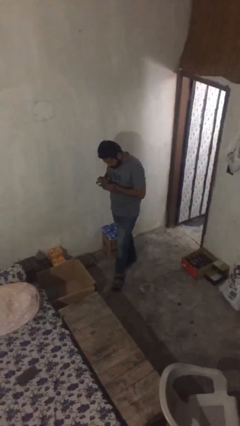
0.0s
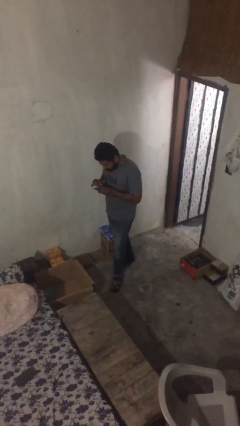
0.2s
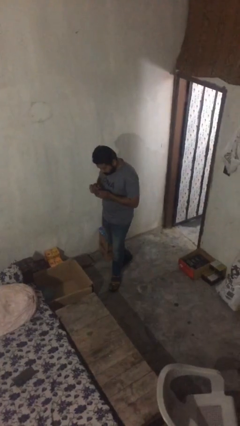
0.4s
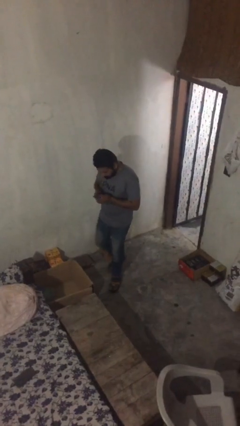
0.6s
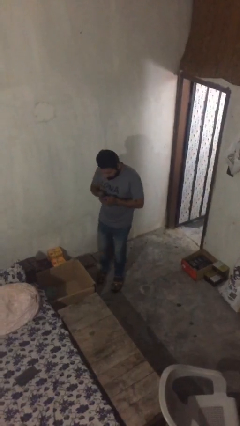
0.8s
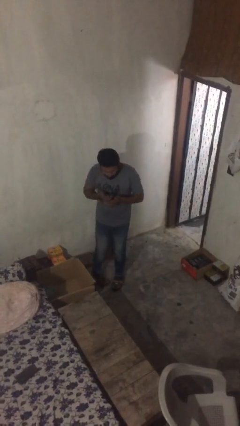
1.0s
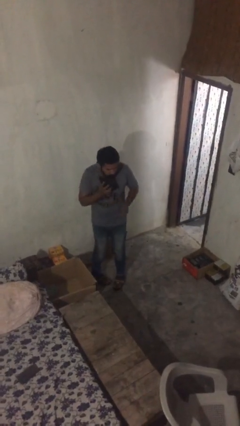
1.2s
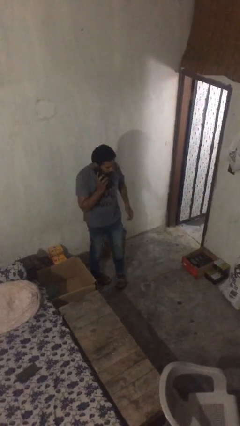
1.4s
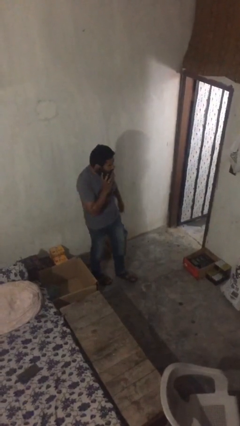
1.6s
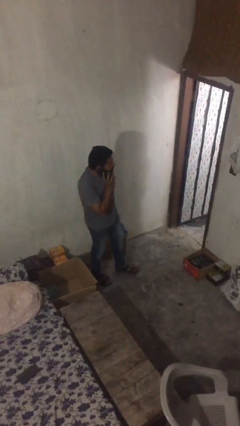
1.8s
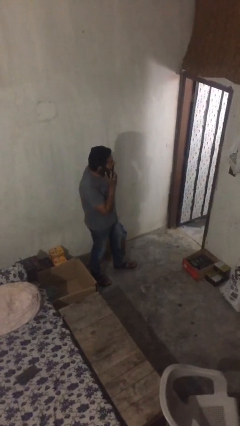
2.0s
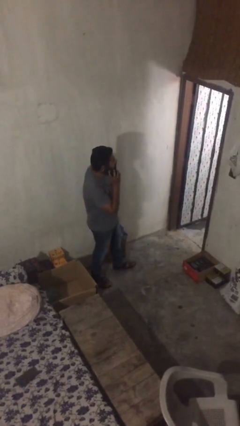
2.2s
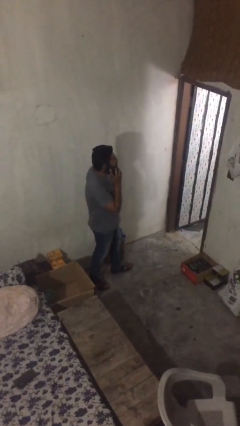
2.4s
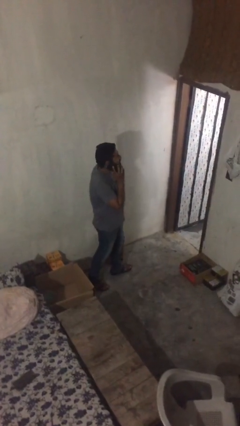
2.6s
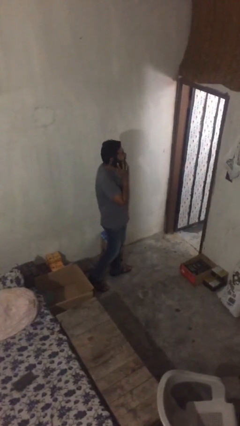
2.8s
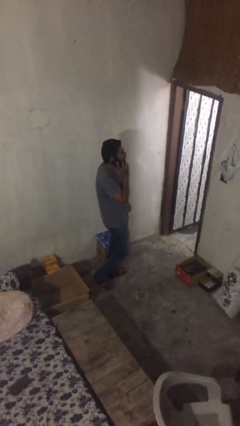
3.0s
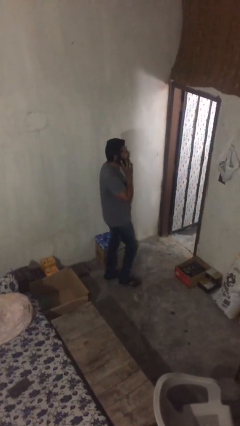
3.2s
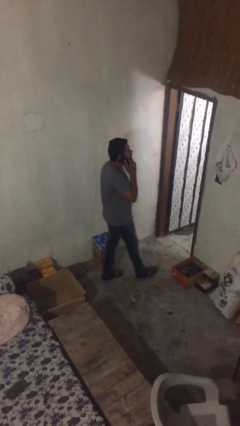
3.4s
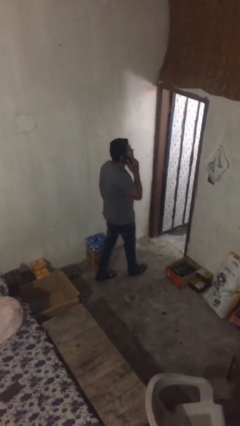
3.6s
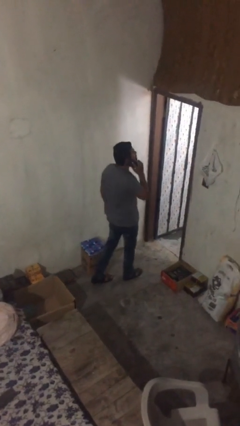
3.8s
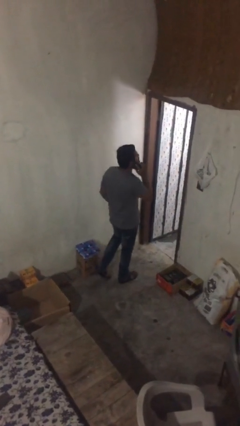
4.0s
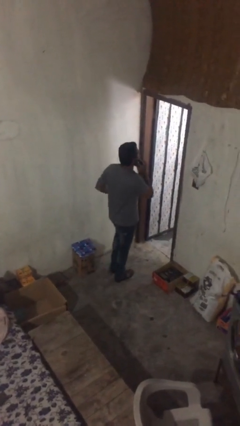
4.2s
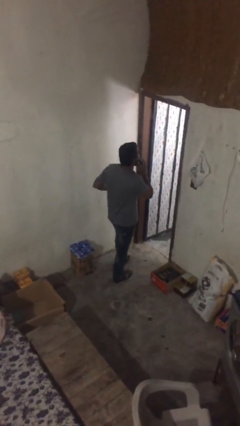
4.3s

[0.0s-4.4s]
person talks on phone

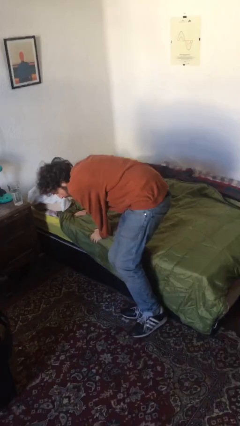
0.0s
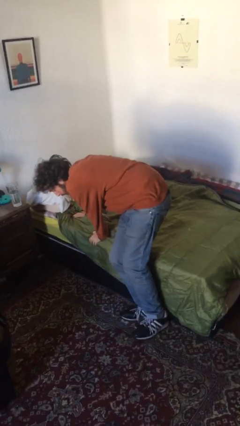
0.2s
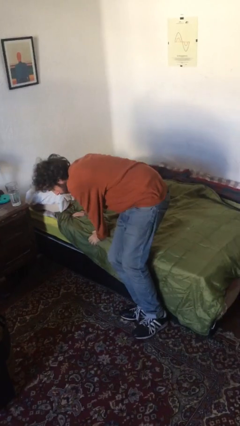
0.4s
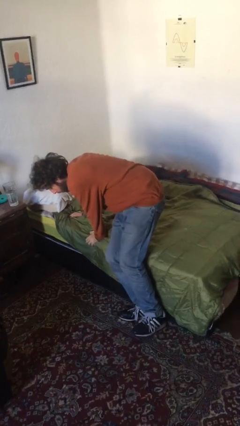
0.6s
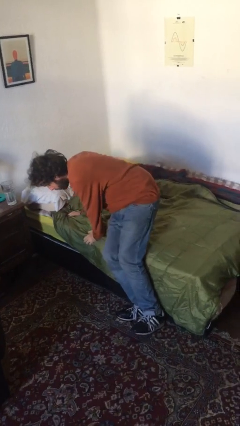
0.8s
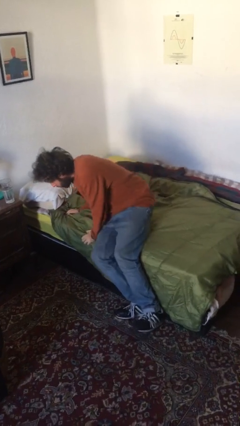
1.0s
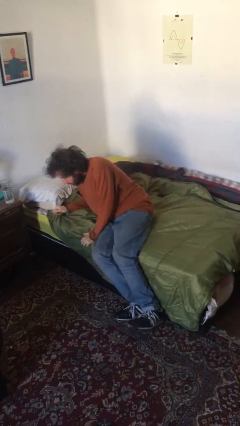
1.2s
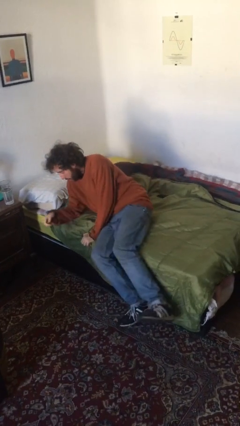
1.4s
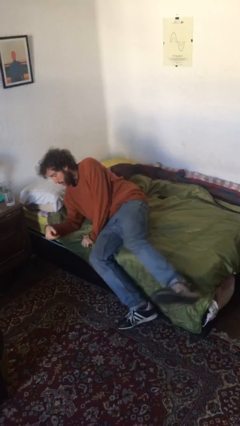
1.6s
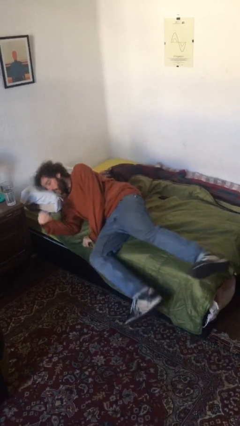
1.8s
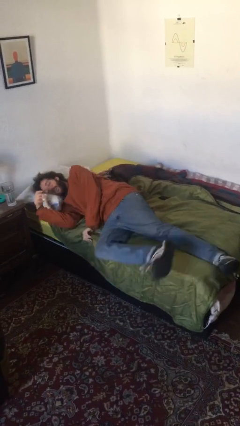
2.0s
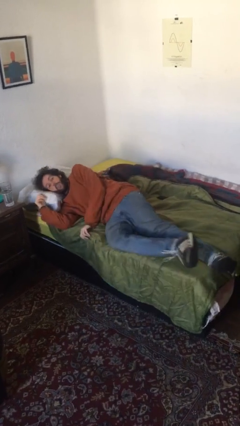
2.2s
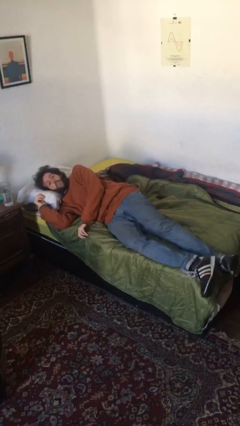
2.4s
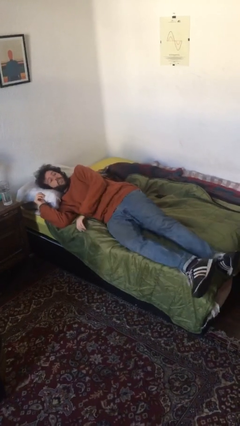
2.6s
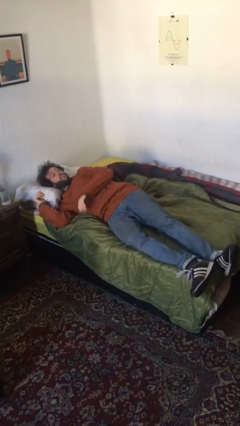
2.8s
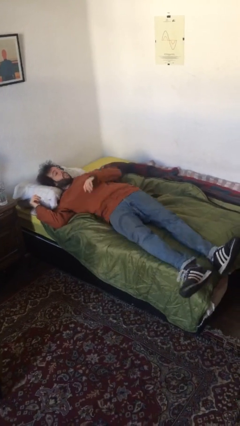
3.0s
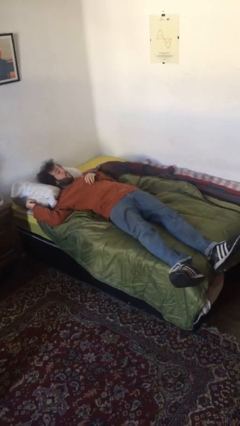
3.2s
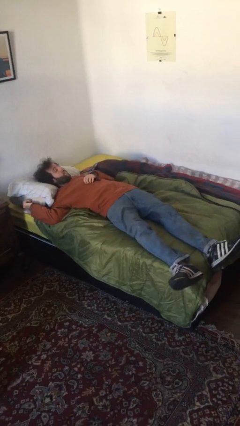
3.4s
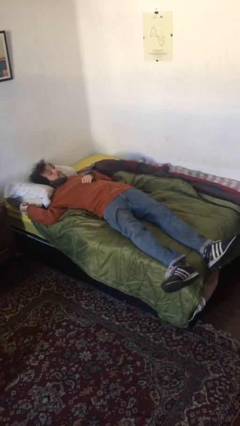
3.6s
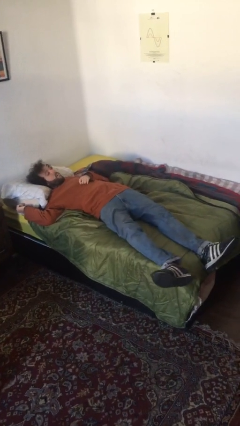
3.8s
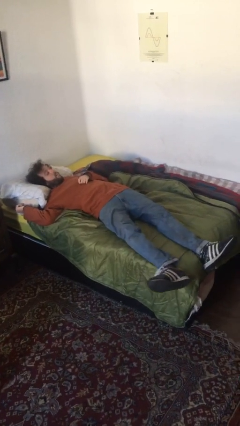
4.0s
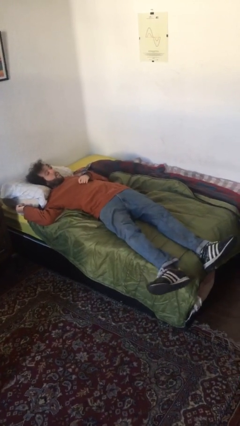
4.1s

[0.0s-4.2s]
person lies down on bed

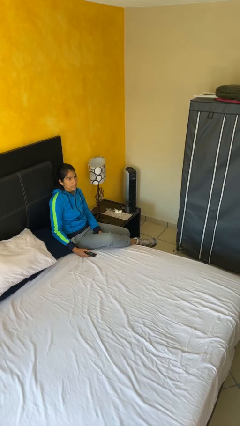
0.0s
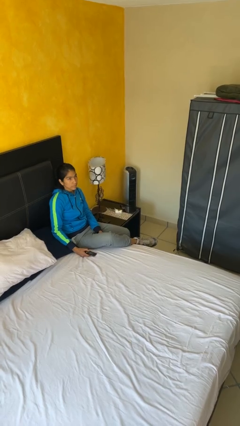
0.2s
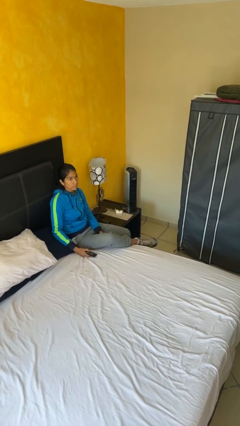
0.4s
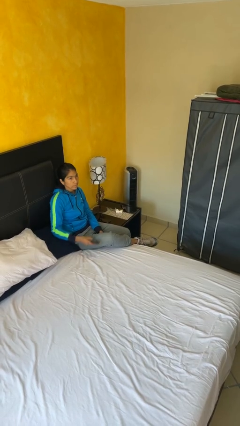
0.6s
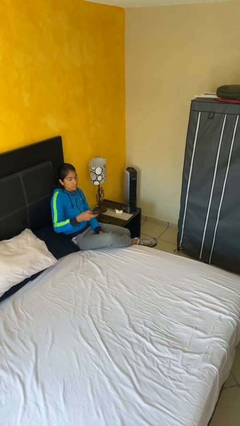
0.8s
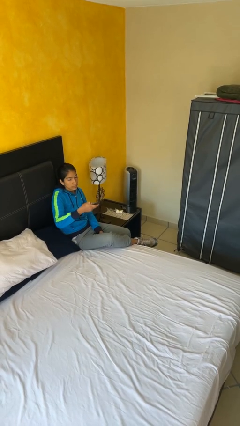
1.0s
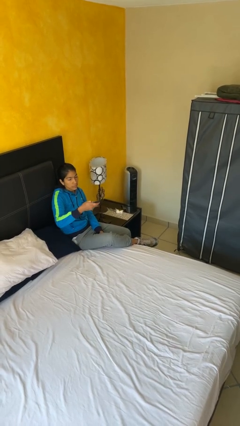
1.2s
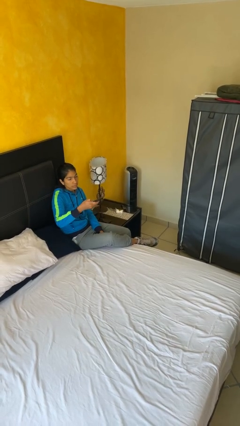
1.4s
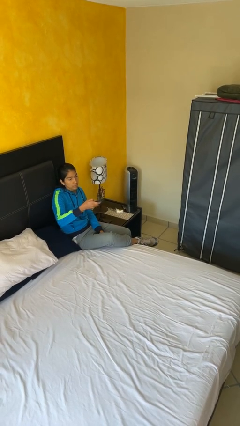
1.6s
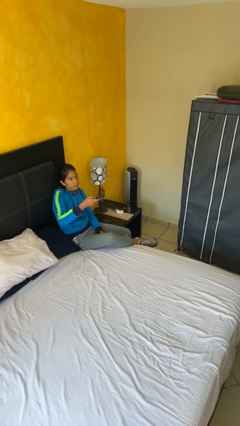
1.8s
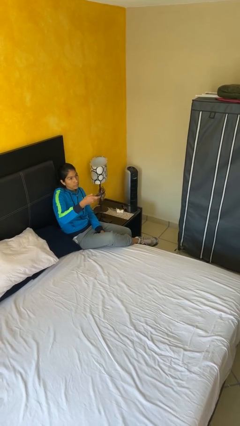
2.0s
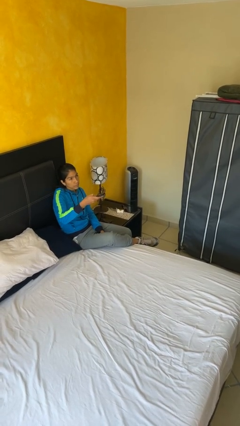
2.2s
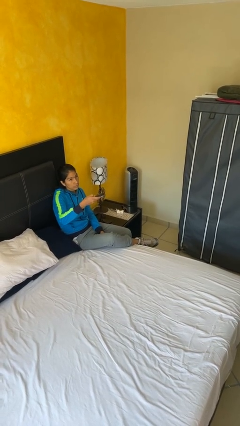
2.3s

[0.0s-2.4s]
person uses television remote

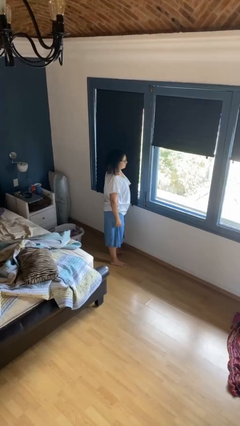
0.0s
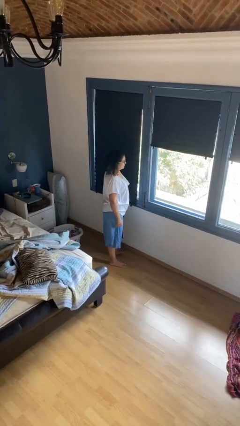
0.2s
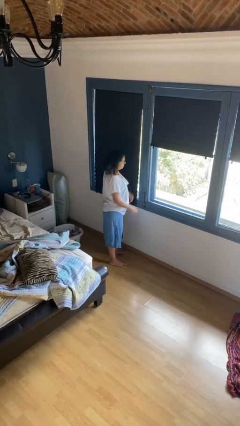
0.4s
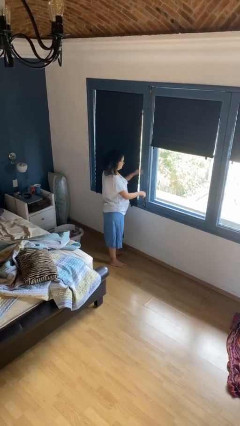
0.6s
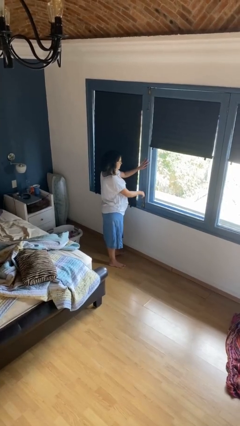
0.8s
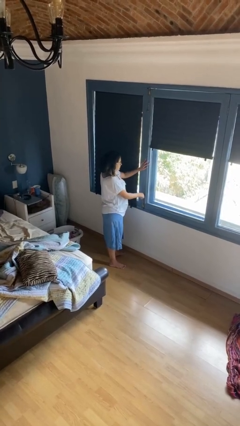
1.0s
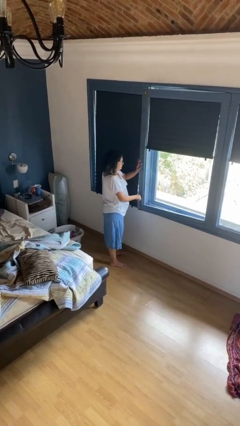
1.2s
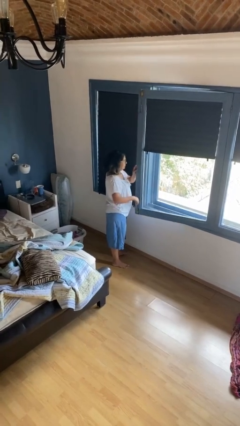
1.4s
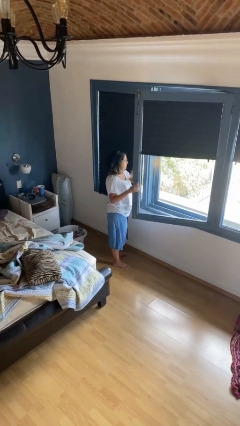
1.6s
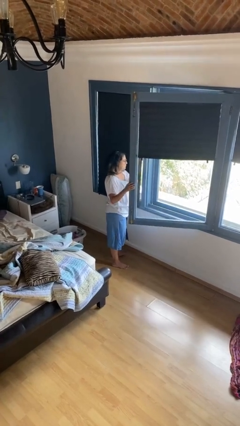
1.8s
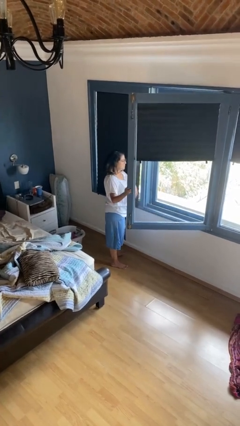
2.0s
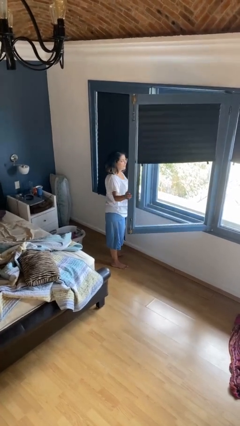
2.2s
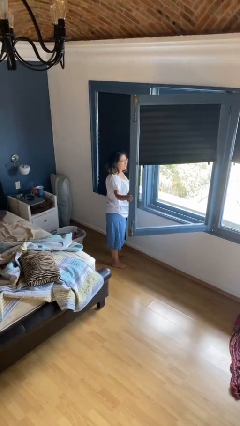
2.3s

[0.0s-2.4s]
person opens home window

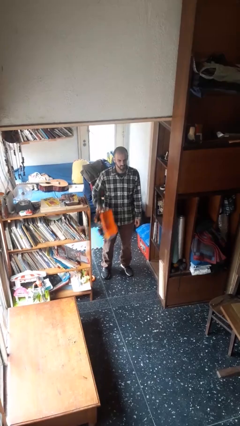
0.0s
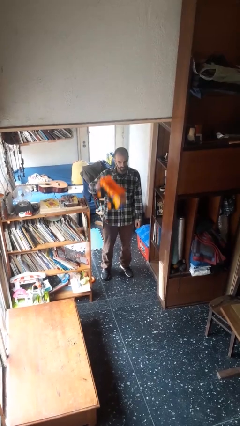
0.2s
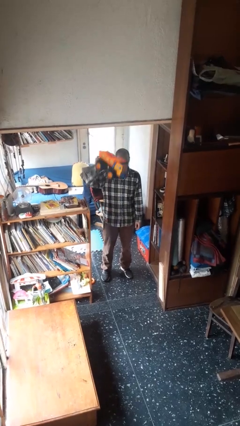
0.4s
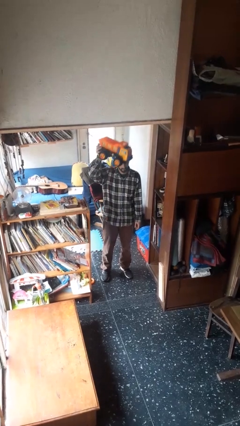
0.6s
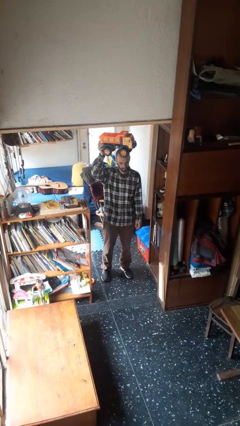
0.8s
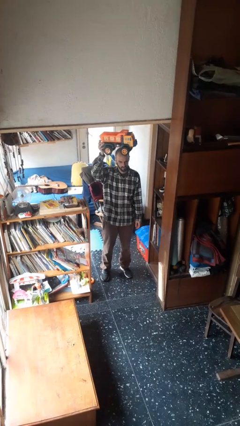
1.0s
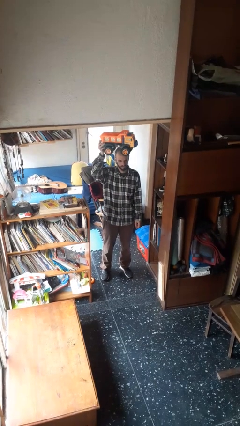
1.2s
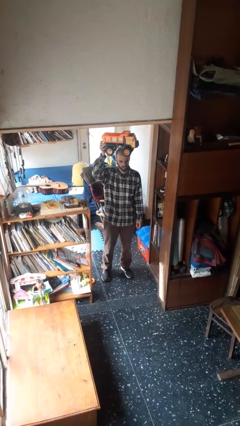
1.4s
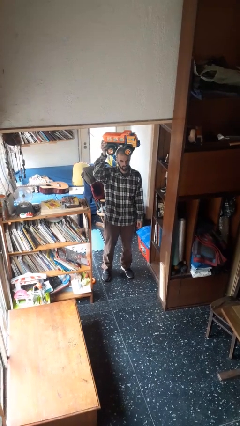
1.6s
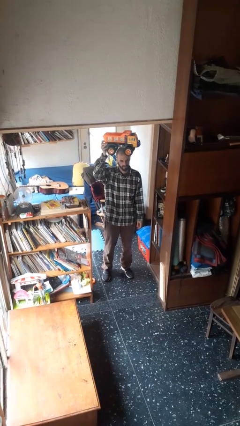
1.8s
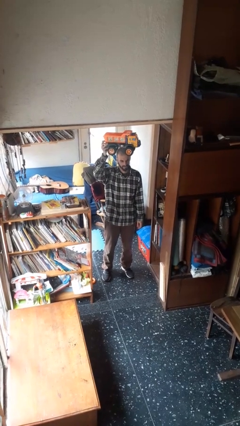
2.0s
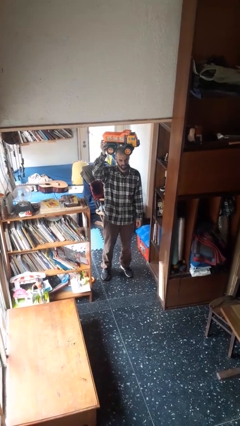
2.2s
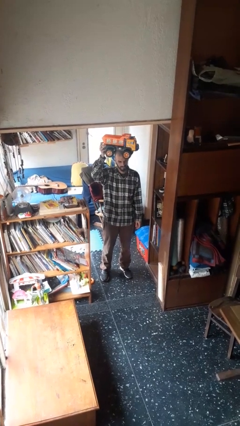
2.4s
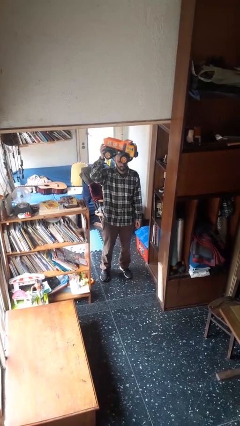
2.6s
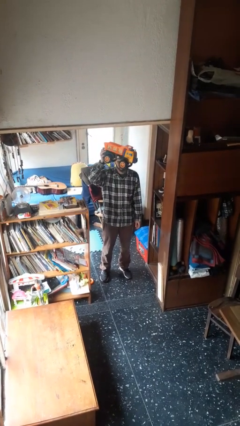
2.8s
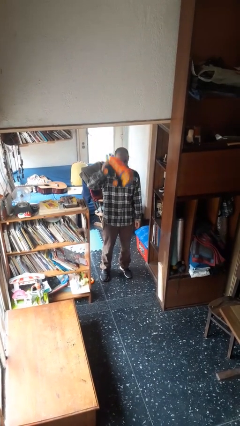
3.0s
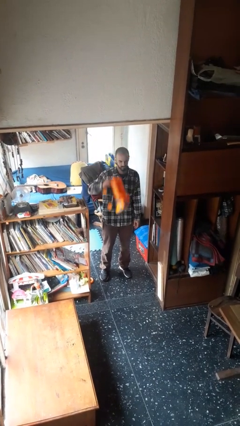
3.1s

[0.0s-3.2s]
person holds object above head

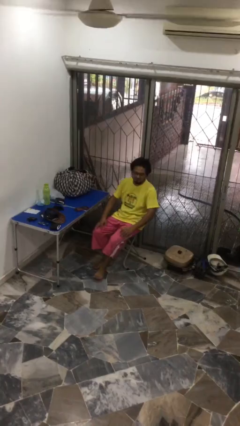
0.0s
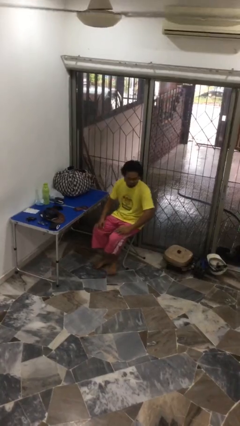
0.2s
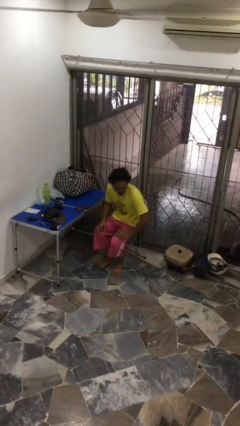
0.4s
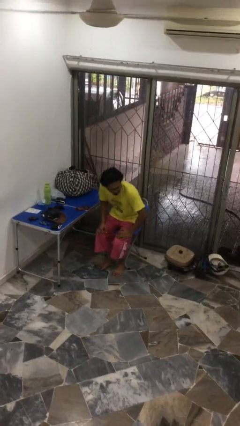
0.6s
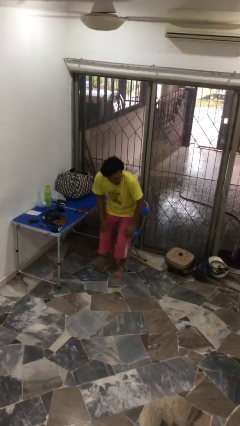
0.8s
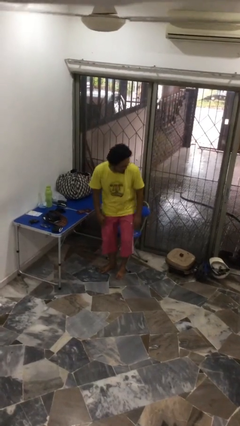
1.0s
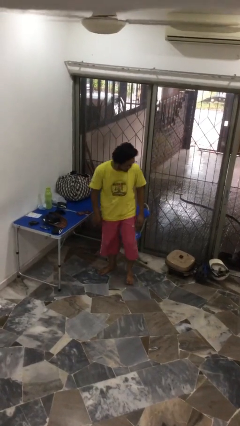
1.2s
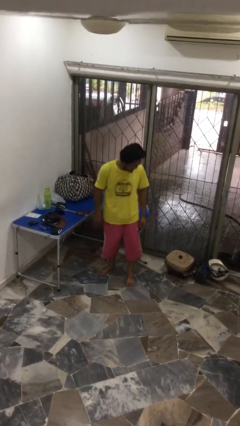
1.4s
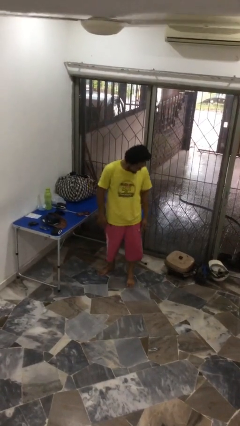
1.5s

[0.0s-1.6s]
person stands up
